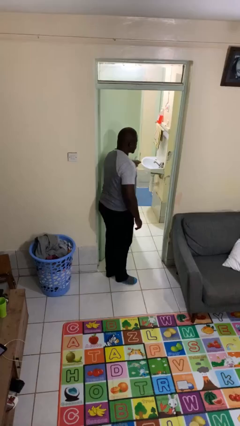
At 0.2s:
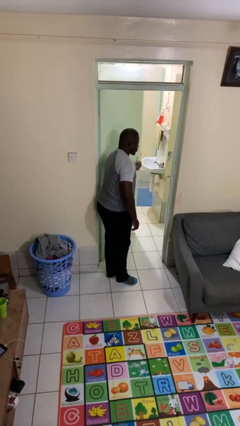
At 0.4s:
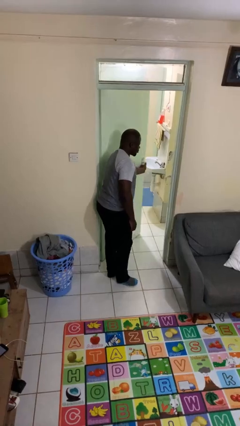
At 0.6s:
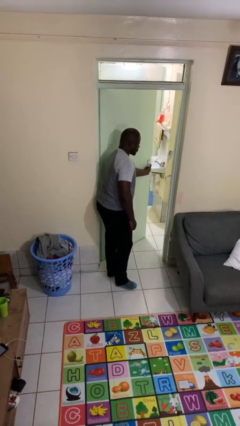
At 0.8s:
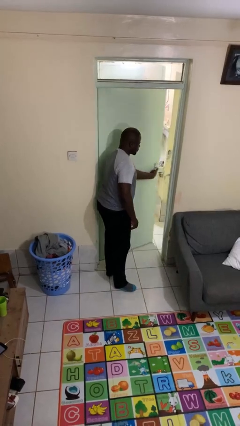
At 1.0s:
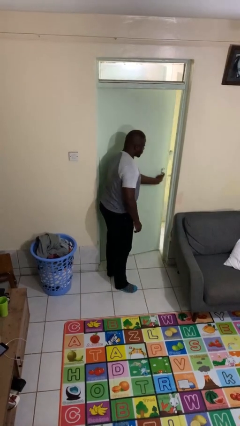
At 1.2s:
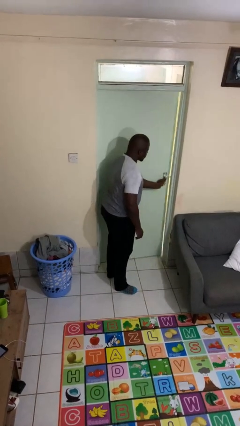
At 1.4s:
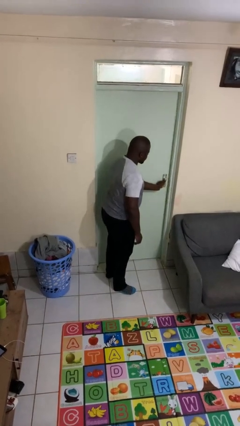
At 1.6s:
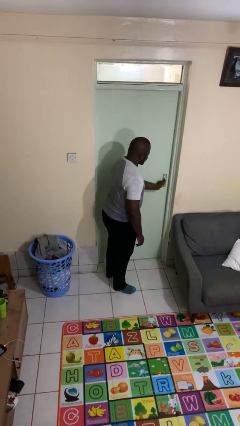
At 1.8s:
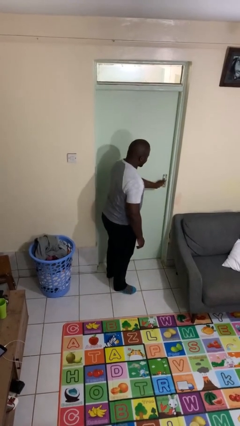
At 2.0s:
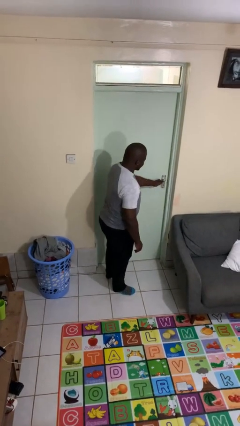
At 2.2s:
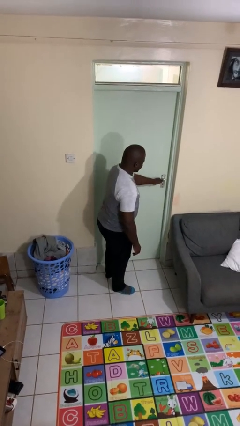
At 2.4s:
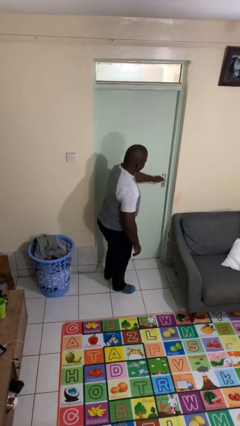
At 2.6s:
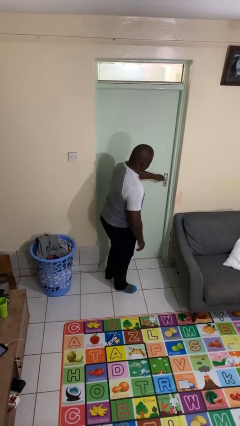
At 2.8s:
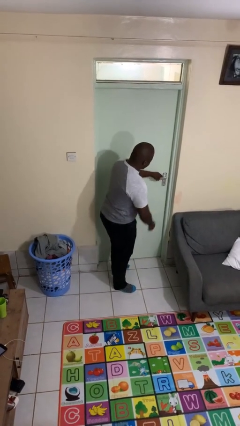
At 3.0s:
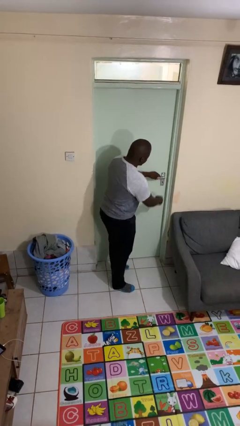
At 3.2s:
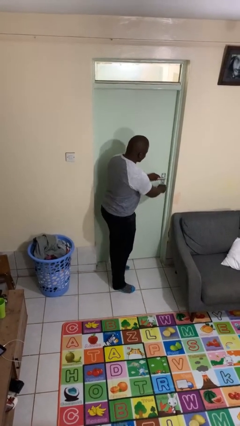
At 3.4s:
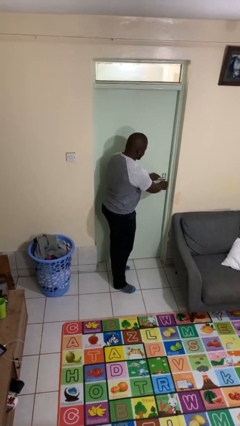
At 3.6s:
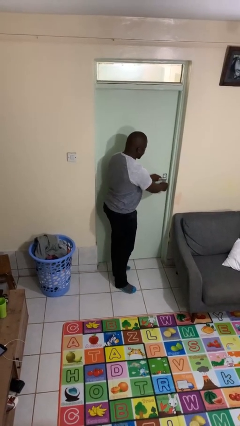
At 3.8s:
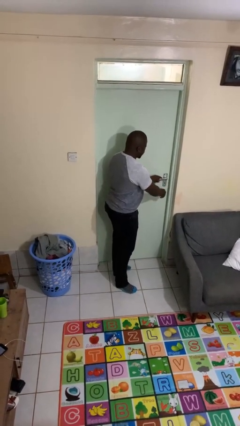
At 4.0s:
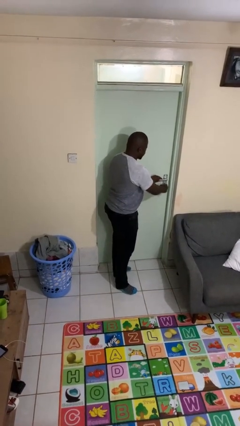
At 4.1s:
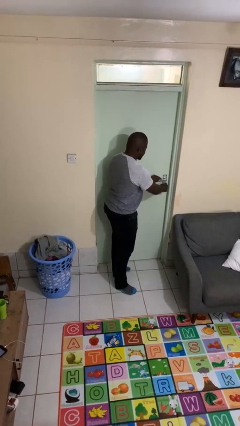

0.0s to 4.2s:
person closes facility door

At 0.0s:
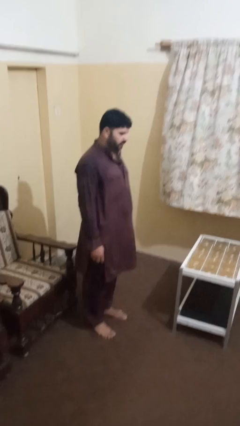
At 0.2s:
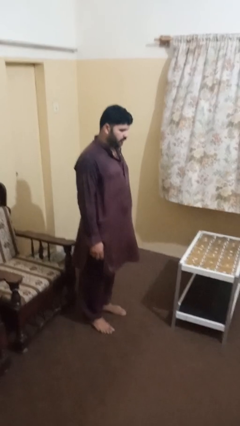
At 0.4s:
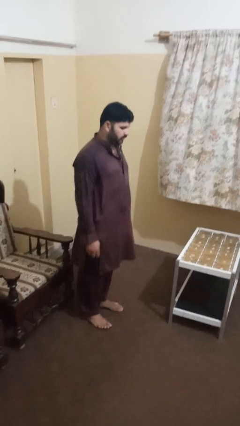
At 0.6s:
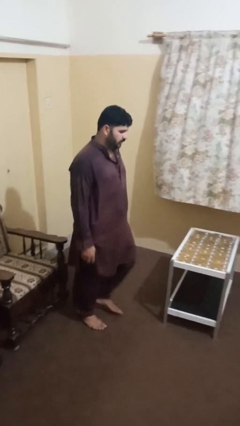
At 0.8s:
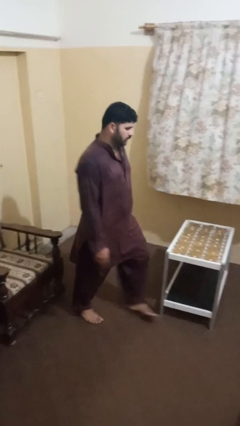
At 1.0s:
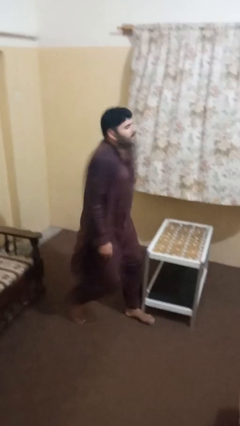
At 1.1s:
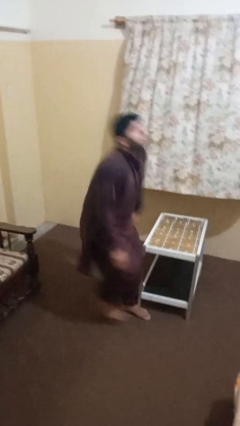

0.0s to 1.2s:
person bumps into table

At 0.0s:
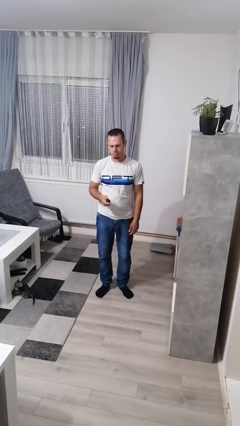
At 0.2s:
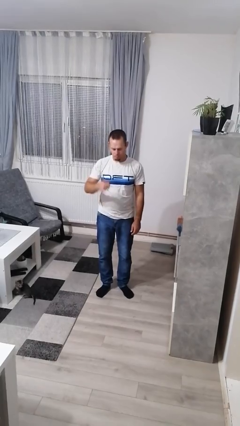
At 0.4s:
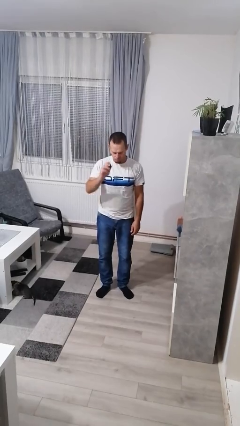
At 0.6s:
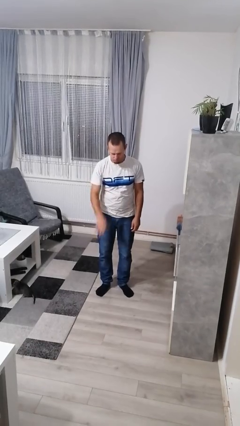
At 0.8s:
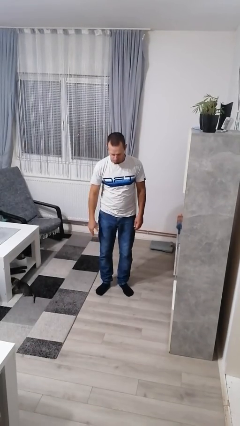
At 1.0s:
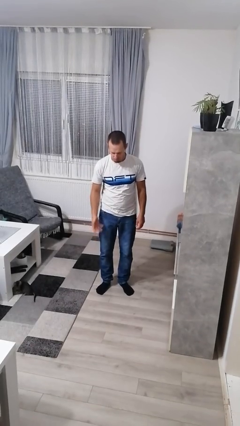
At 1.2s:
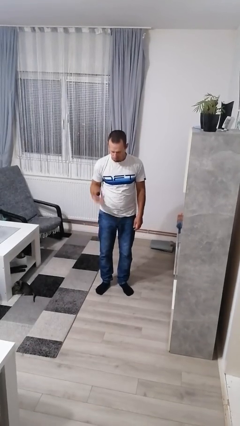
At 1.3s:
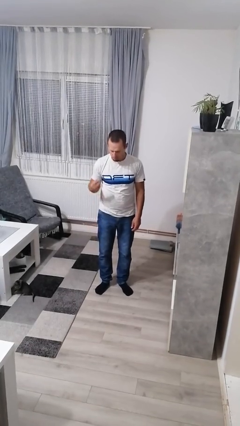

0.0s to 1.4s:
person bounces ball on floor

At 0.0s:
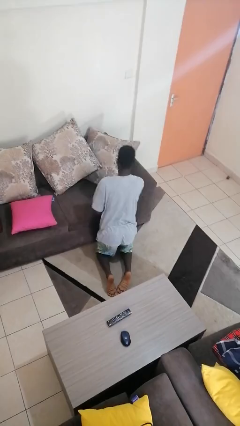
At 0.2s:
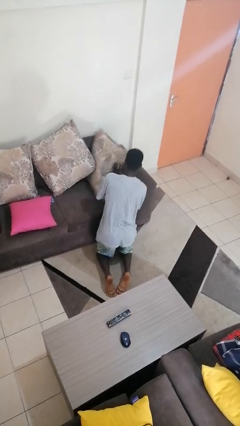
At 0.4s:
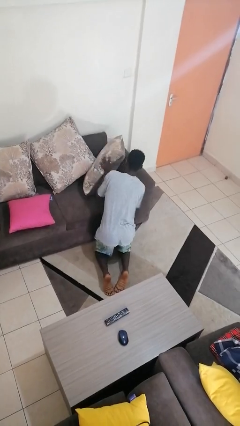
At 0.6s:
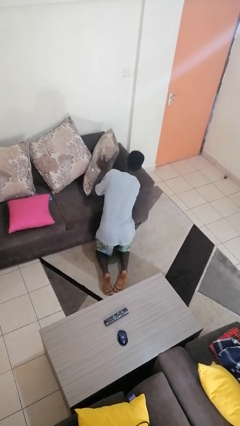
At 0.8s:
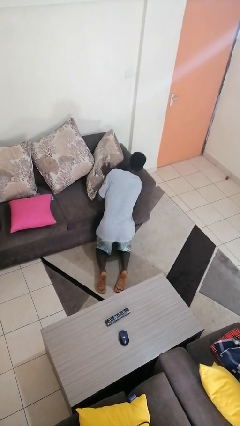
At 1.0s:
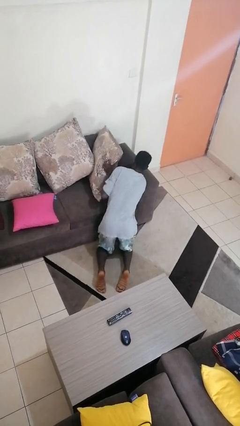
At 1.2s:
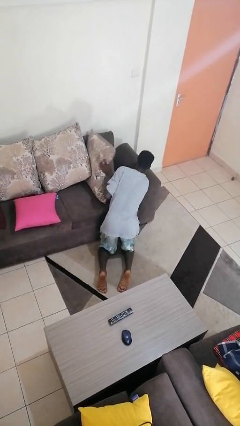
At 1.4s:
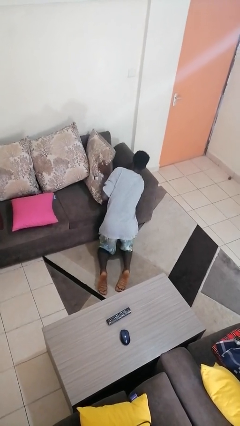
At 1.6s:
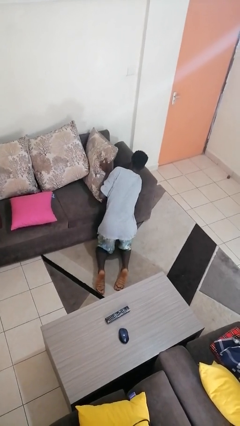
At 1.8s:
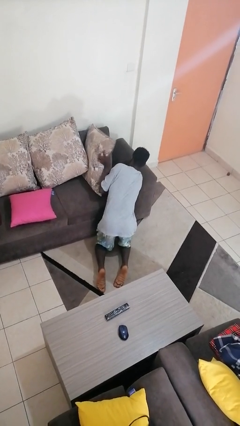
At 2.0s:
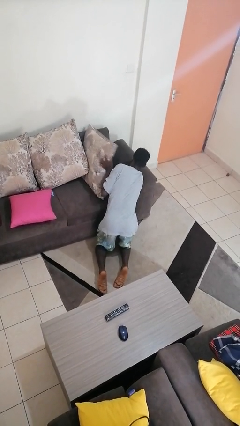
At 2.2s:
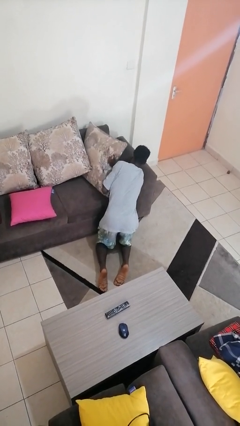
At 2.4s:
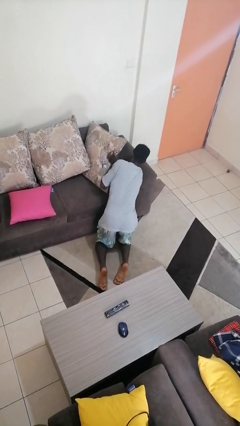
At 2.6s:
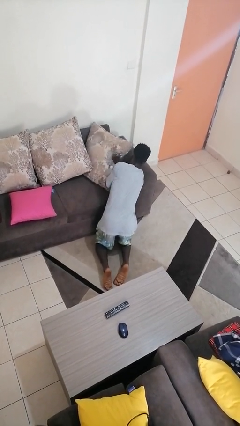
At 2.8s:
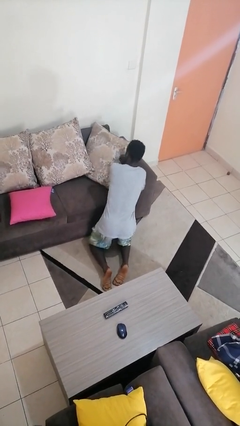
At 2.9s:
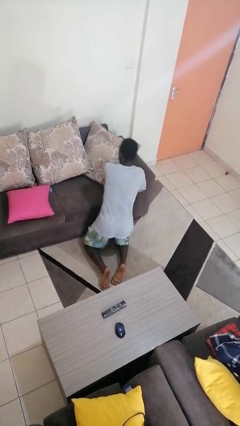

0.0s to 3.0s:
person searches in couch

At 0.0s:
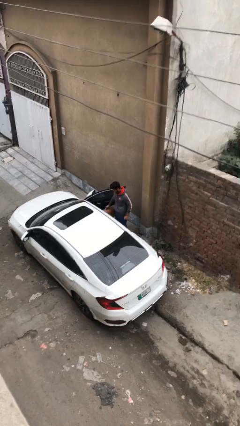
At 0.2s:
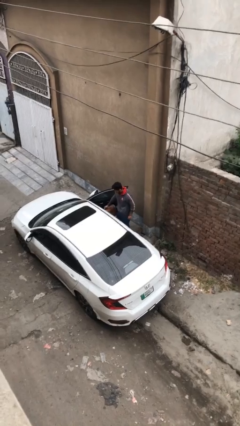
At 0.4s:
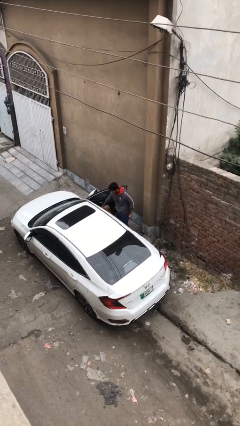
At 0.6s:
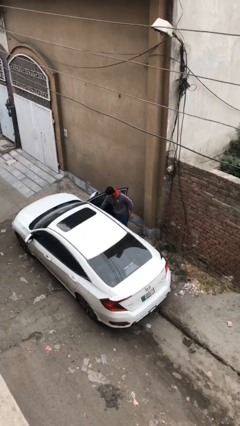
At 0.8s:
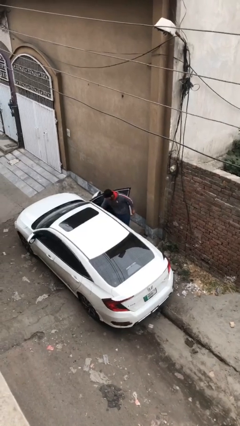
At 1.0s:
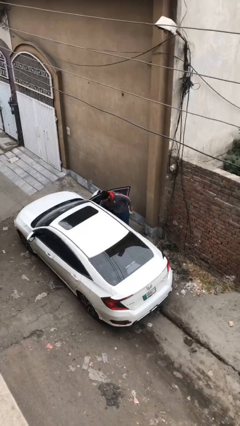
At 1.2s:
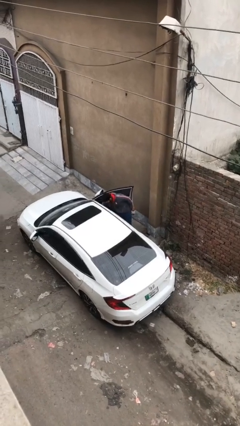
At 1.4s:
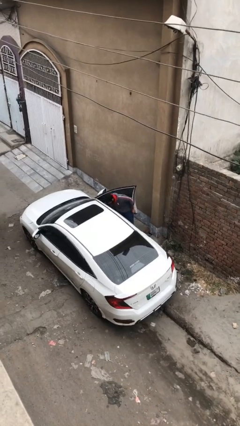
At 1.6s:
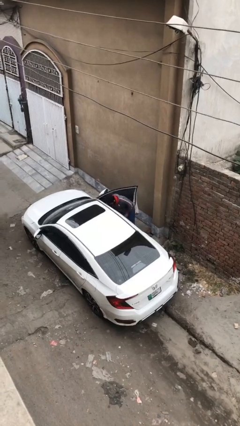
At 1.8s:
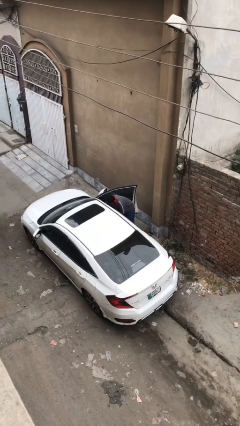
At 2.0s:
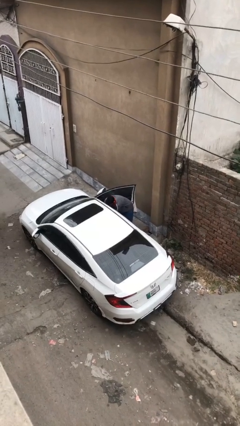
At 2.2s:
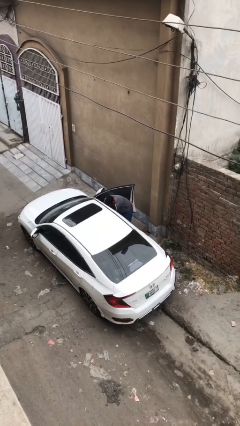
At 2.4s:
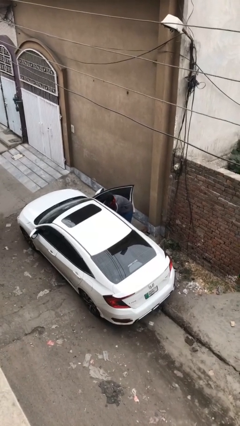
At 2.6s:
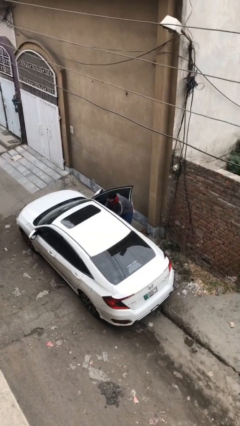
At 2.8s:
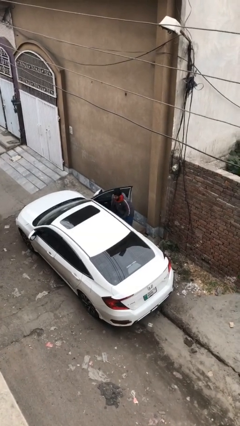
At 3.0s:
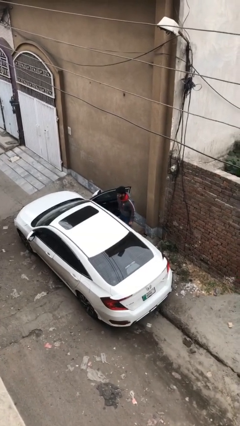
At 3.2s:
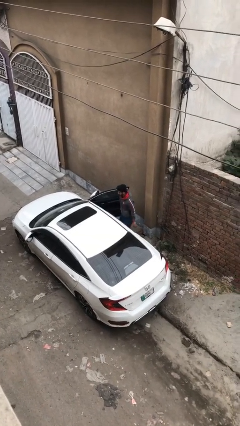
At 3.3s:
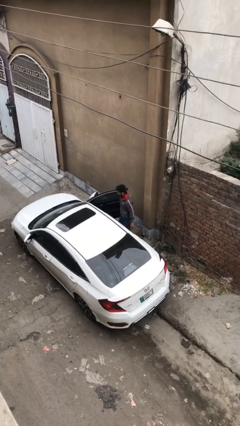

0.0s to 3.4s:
person loads car

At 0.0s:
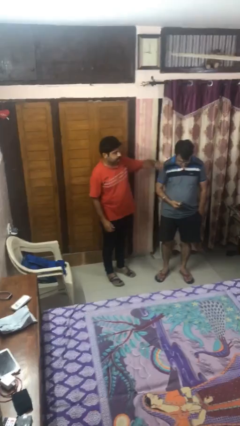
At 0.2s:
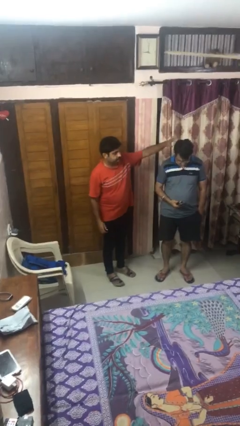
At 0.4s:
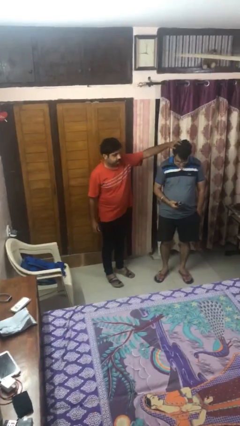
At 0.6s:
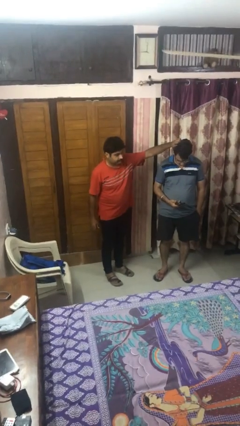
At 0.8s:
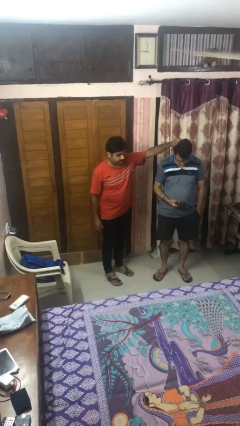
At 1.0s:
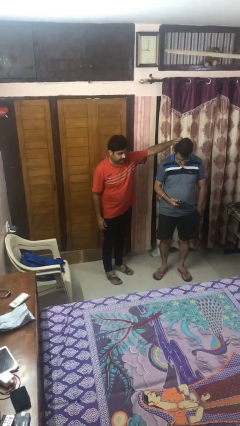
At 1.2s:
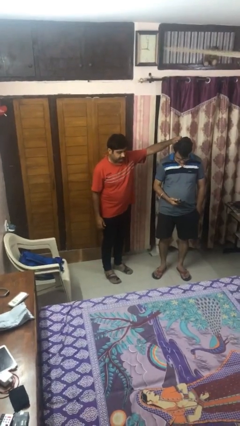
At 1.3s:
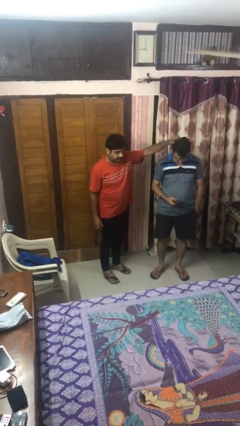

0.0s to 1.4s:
person grabs person by hair

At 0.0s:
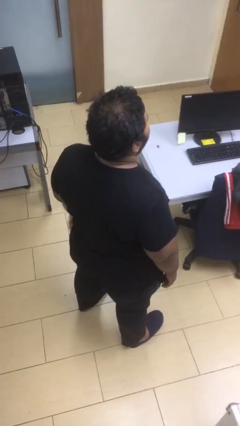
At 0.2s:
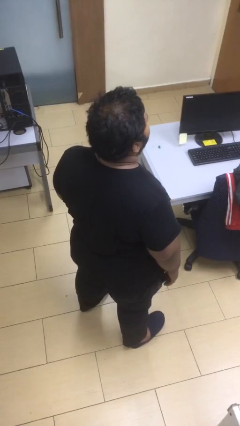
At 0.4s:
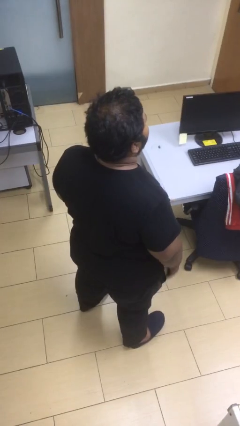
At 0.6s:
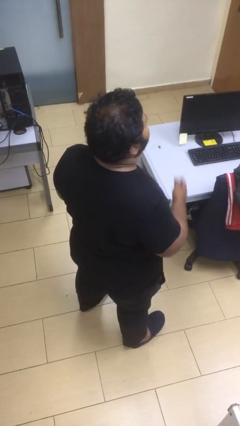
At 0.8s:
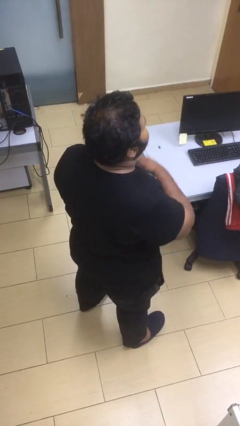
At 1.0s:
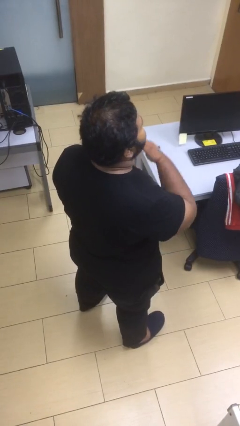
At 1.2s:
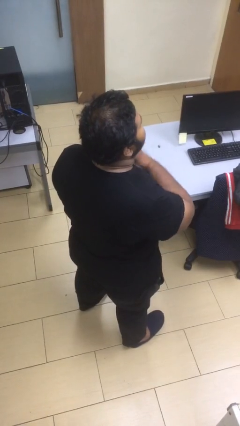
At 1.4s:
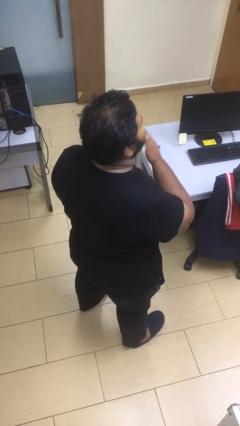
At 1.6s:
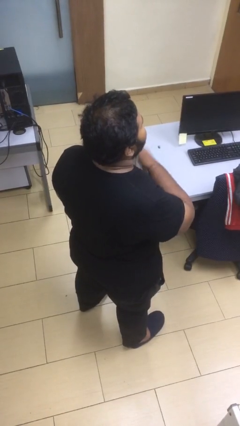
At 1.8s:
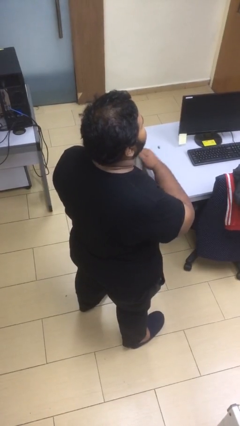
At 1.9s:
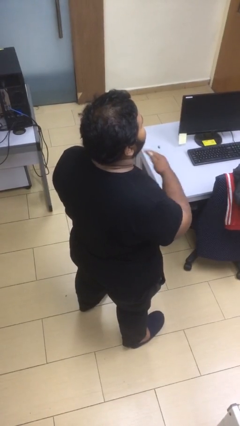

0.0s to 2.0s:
person drums on chest

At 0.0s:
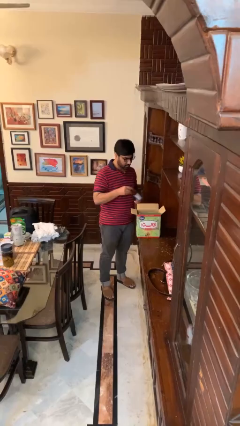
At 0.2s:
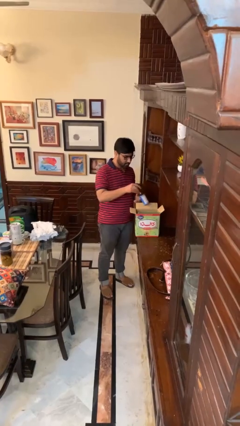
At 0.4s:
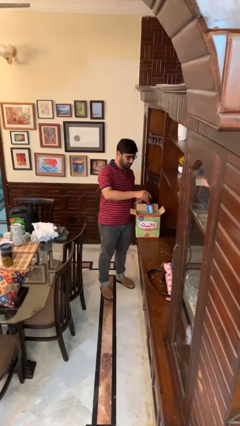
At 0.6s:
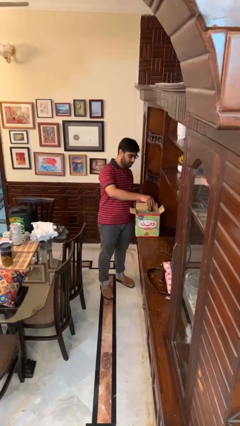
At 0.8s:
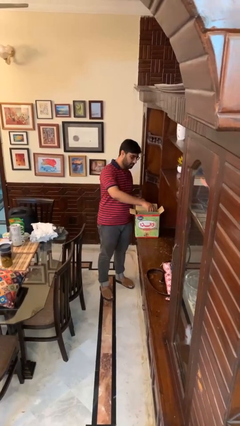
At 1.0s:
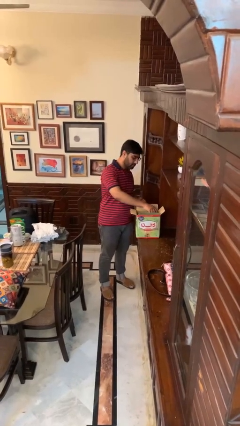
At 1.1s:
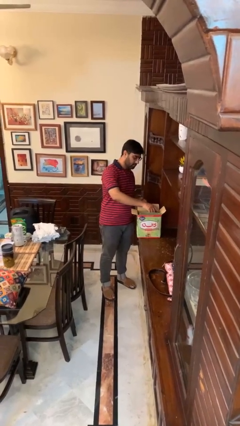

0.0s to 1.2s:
person puts object into box
